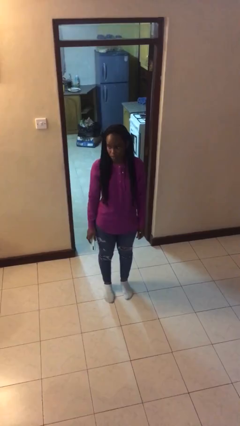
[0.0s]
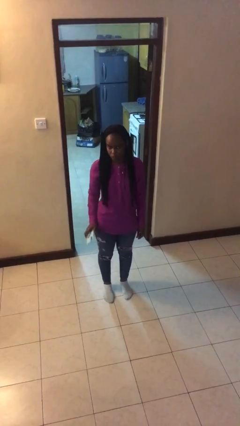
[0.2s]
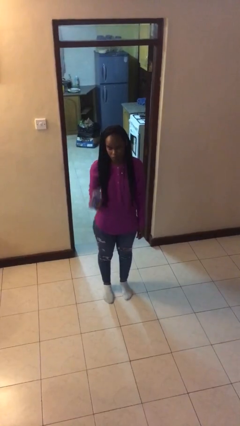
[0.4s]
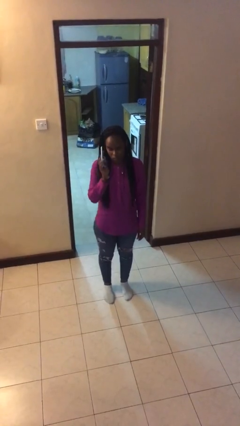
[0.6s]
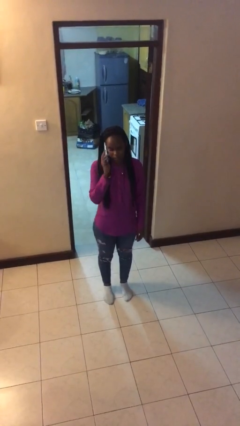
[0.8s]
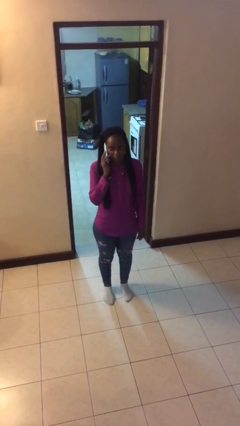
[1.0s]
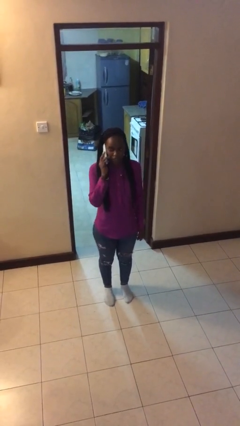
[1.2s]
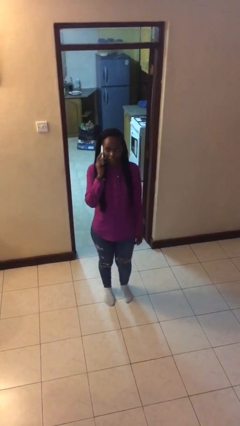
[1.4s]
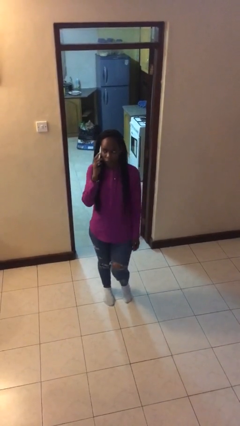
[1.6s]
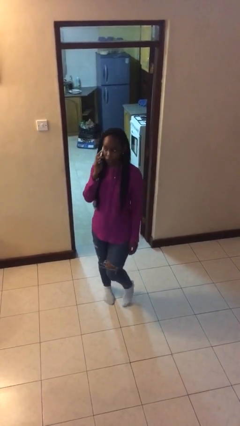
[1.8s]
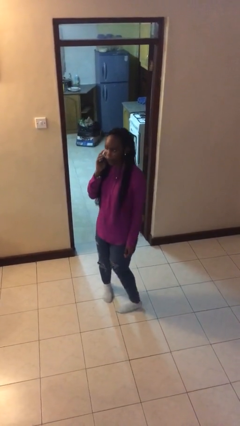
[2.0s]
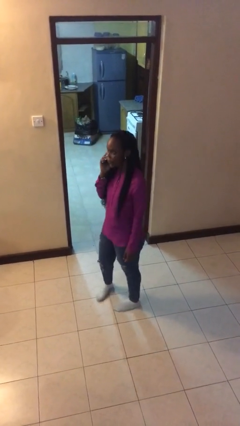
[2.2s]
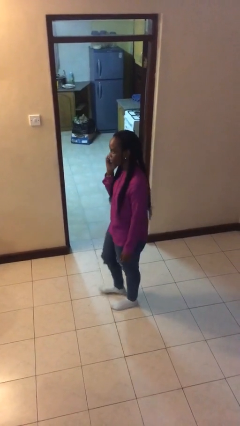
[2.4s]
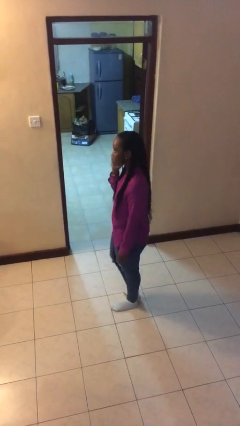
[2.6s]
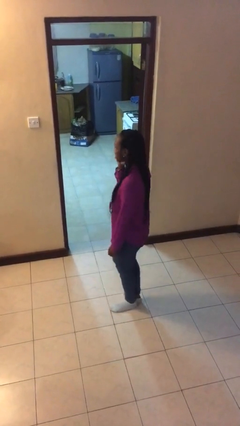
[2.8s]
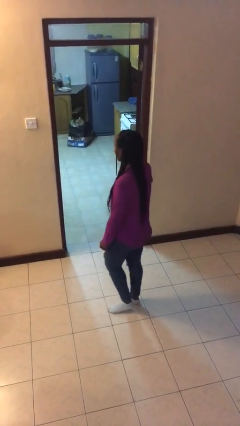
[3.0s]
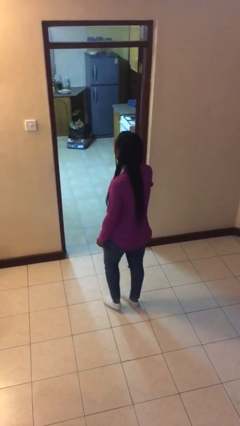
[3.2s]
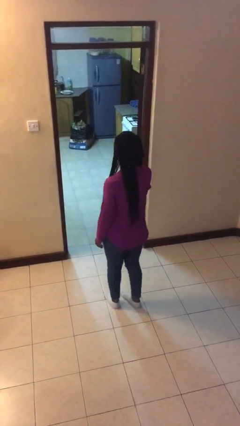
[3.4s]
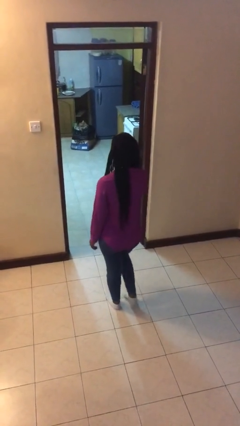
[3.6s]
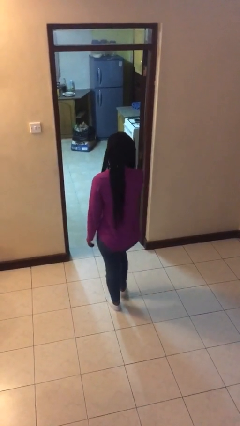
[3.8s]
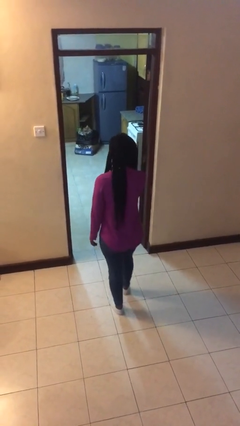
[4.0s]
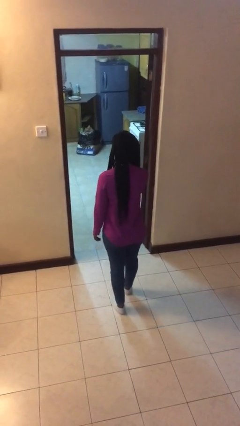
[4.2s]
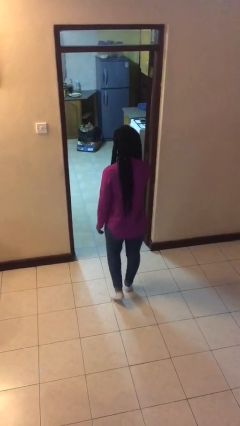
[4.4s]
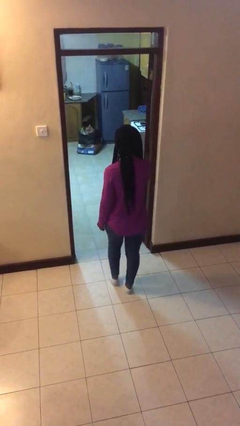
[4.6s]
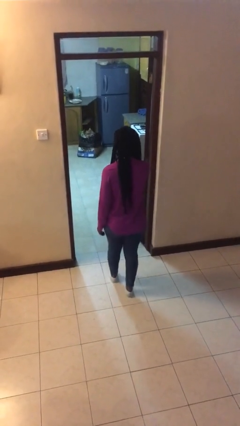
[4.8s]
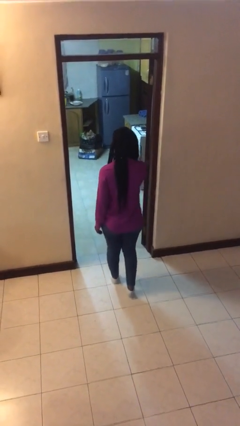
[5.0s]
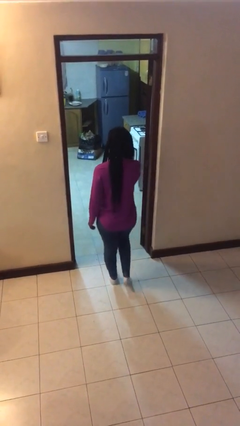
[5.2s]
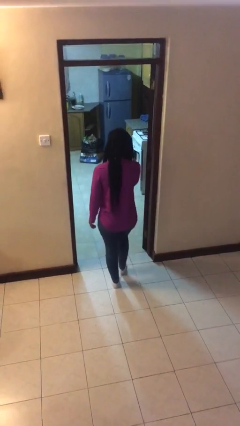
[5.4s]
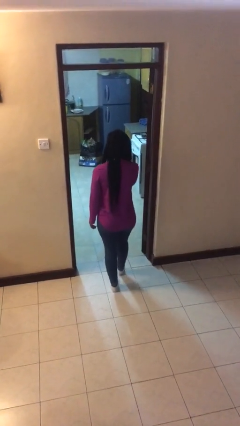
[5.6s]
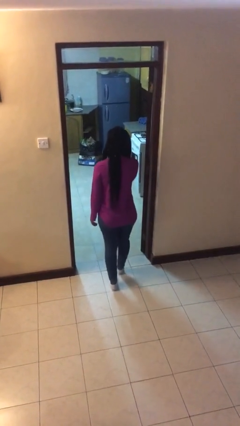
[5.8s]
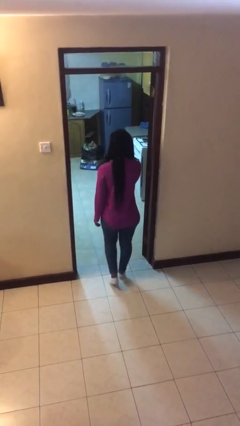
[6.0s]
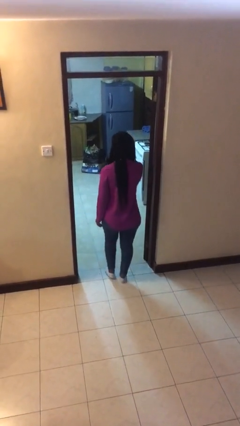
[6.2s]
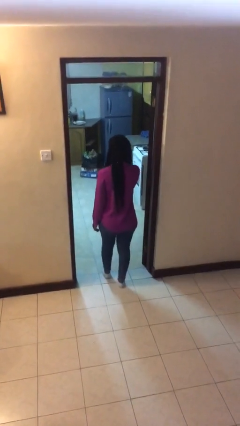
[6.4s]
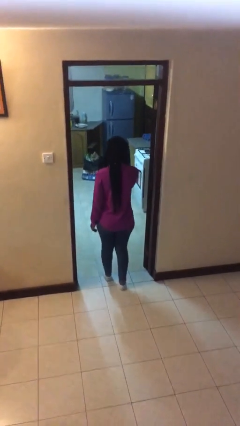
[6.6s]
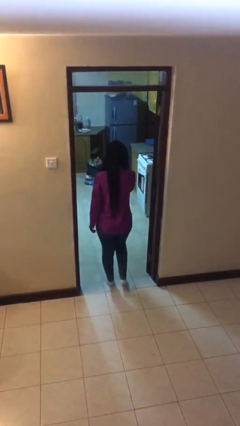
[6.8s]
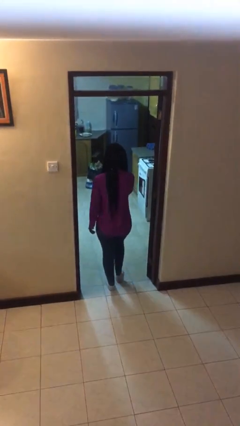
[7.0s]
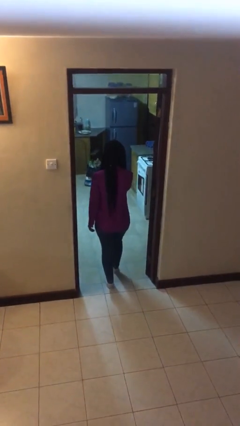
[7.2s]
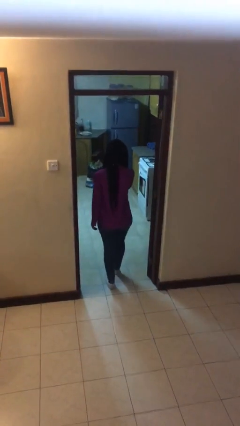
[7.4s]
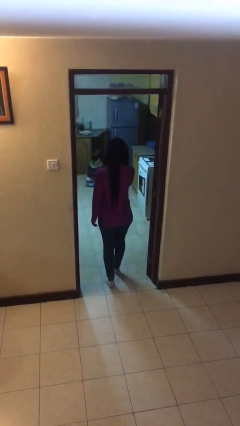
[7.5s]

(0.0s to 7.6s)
person exits scene through structure

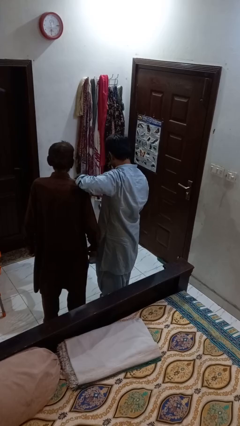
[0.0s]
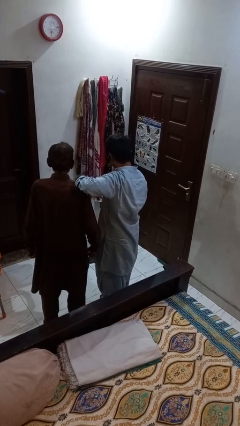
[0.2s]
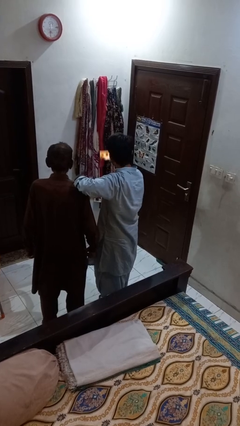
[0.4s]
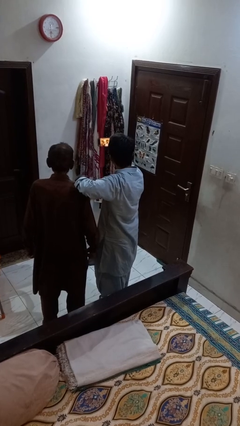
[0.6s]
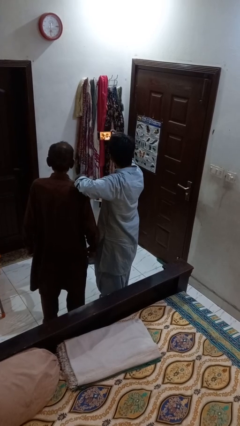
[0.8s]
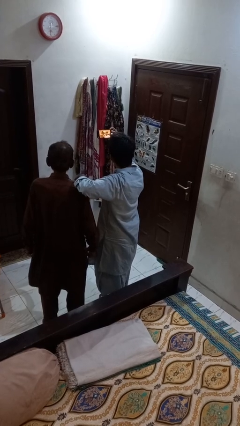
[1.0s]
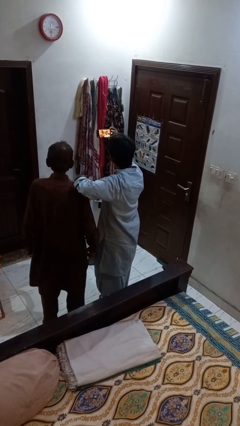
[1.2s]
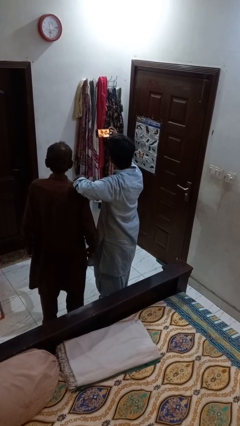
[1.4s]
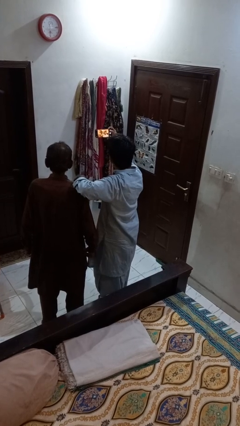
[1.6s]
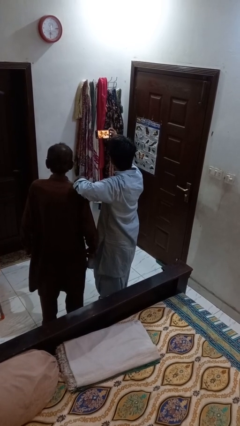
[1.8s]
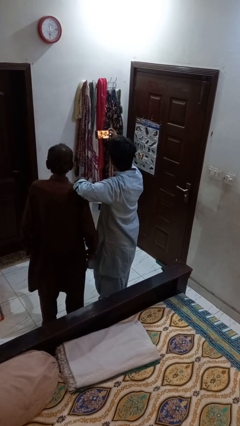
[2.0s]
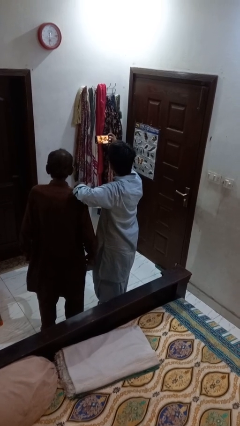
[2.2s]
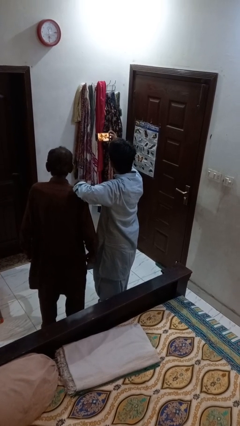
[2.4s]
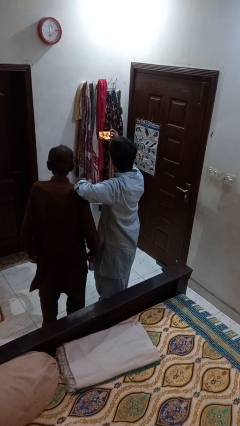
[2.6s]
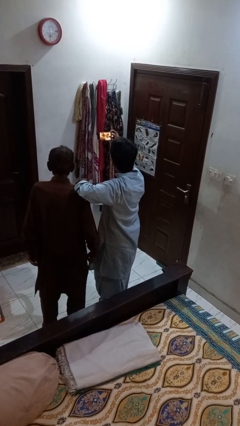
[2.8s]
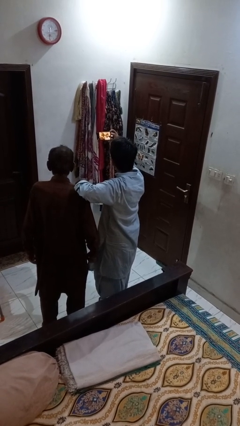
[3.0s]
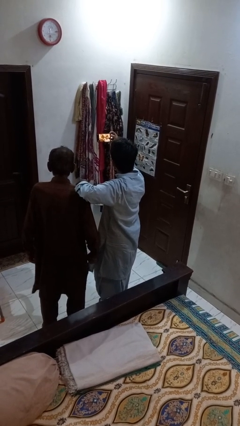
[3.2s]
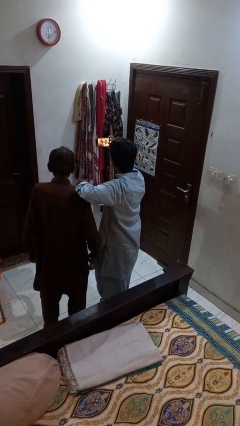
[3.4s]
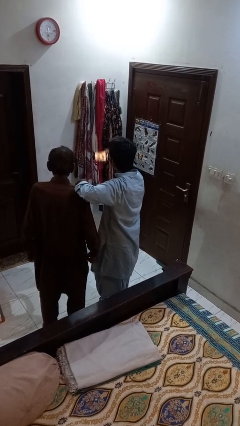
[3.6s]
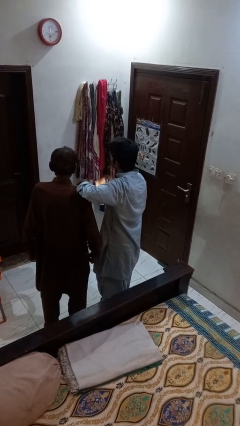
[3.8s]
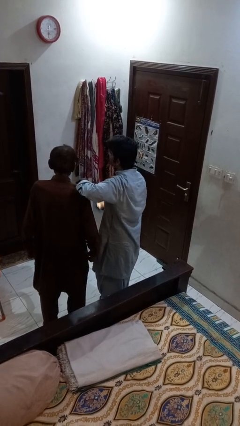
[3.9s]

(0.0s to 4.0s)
person takes selfie with person

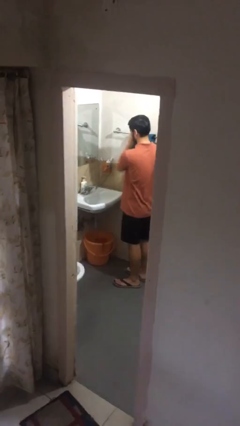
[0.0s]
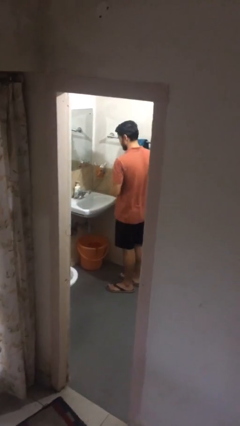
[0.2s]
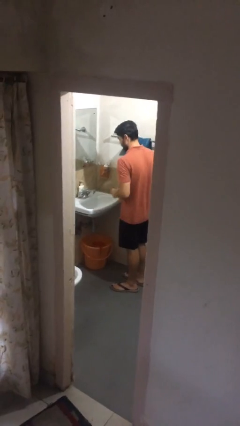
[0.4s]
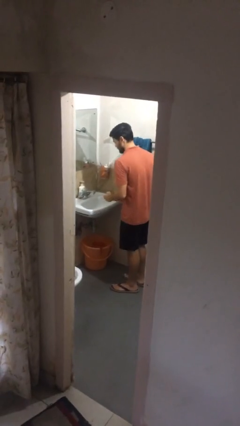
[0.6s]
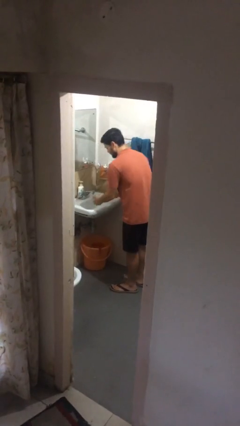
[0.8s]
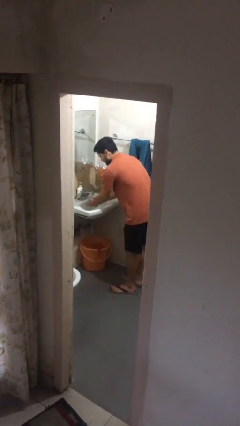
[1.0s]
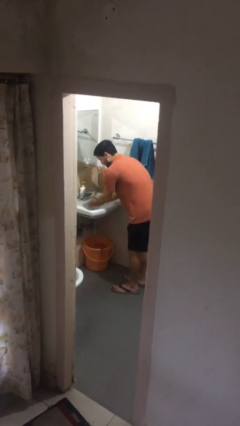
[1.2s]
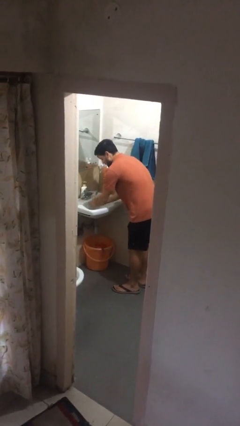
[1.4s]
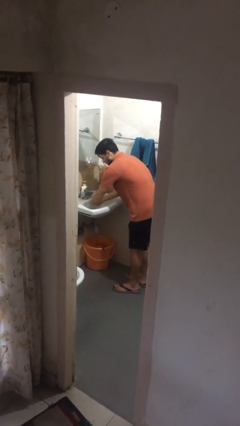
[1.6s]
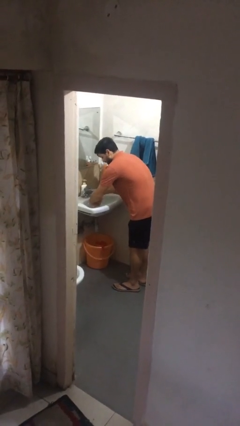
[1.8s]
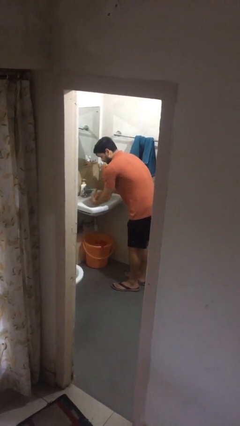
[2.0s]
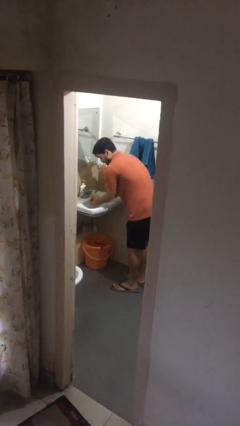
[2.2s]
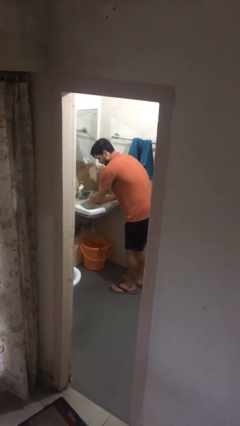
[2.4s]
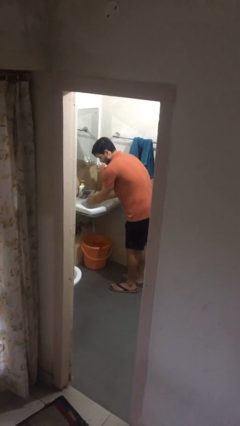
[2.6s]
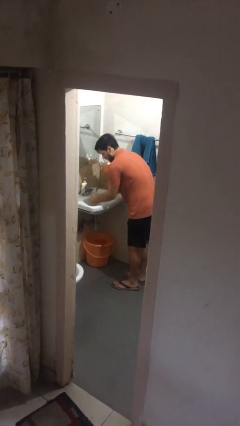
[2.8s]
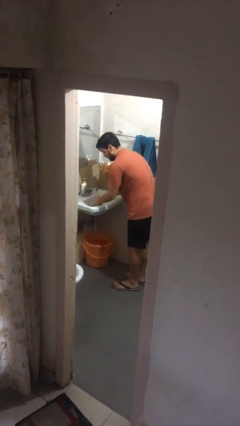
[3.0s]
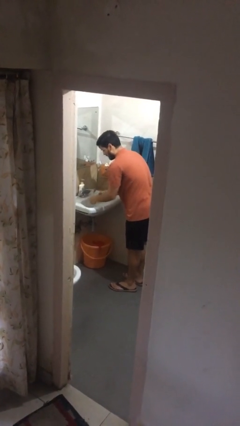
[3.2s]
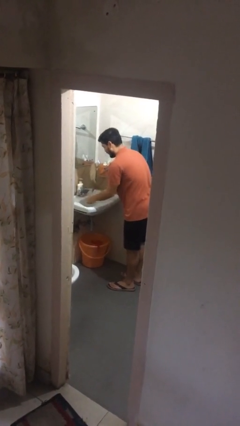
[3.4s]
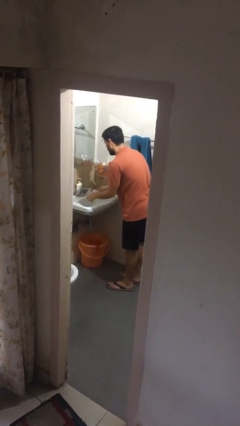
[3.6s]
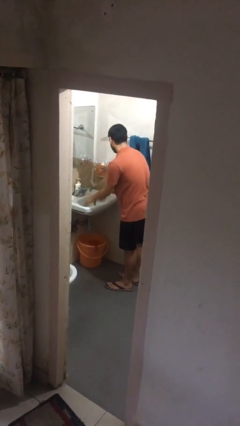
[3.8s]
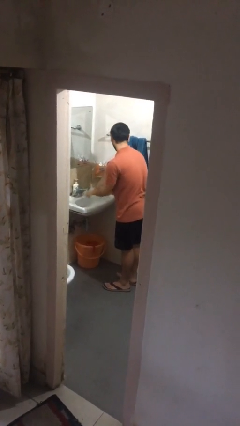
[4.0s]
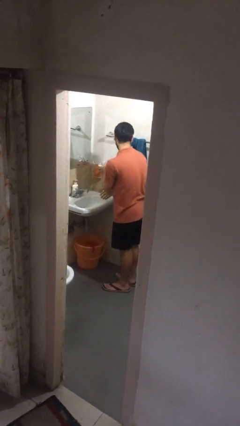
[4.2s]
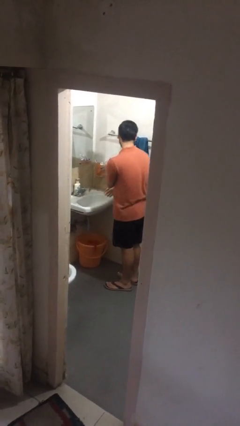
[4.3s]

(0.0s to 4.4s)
person washes hands

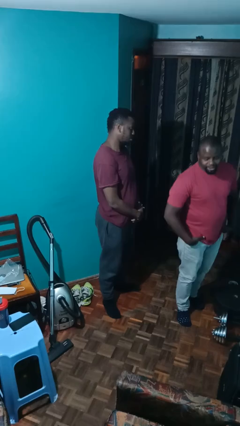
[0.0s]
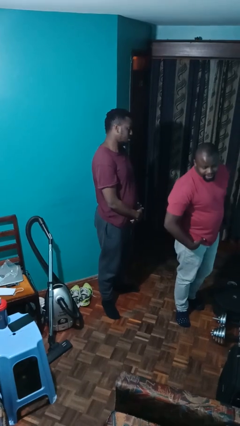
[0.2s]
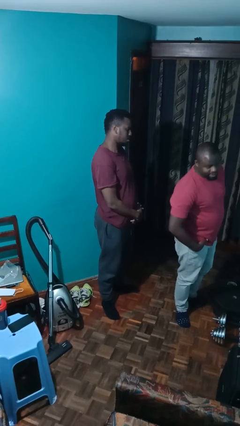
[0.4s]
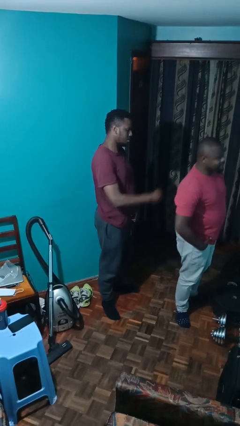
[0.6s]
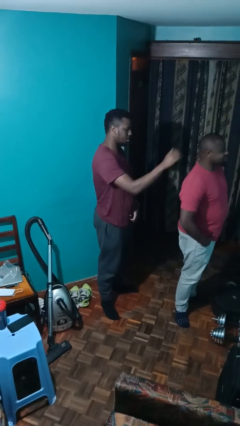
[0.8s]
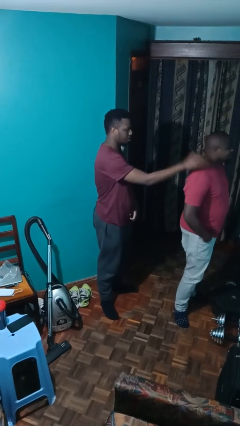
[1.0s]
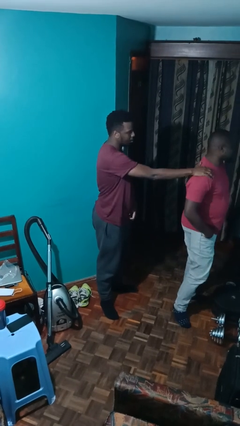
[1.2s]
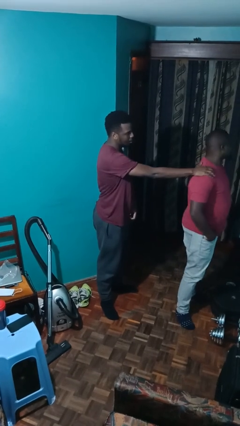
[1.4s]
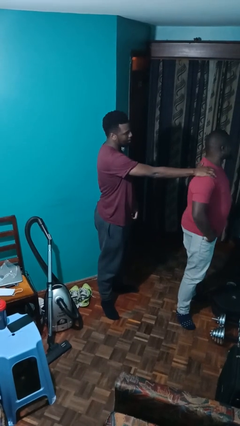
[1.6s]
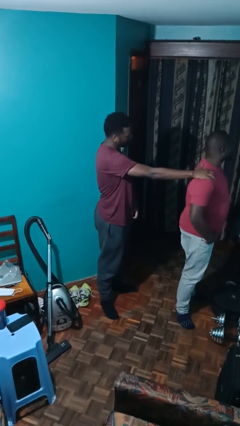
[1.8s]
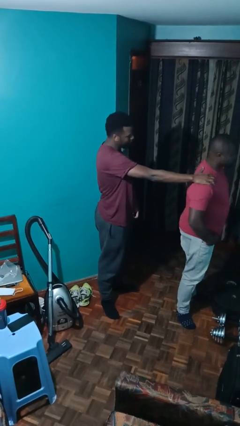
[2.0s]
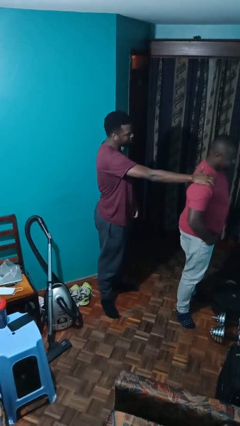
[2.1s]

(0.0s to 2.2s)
person grabs person by shoulder
